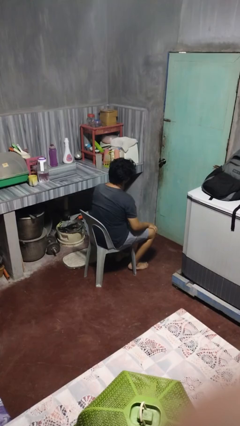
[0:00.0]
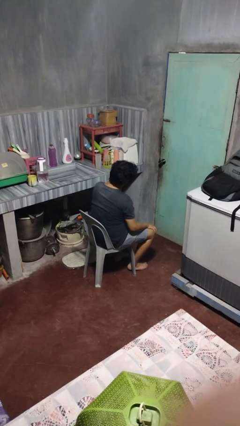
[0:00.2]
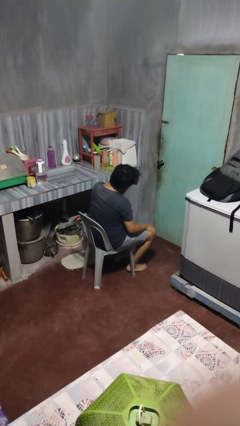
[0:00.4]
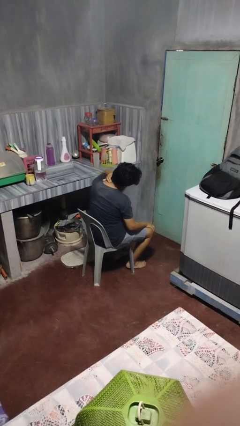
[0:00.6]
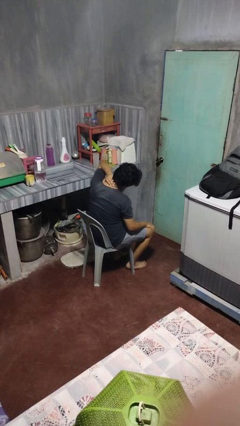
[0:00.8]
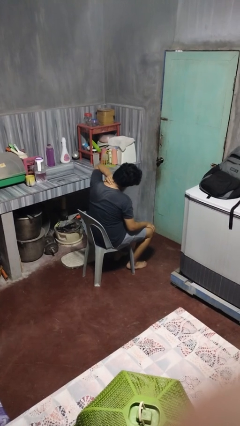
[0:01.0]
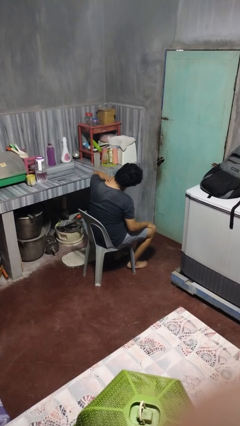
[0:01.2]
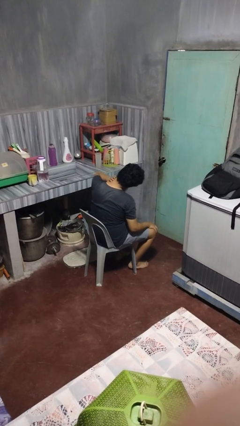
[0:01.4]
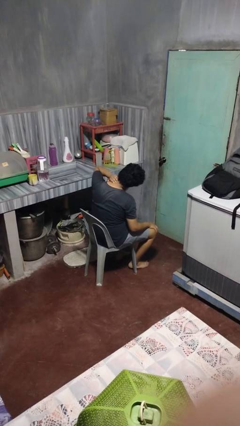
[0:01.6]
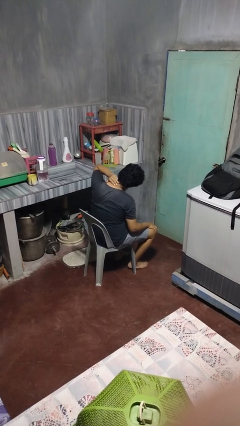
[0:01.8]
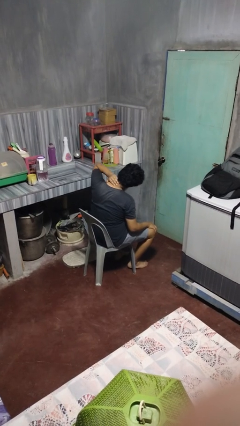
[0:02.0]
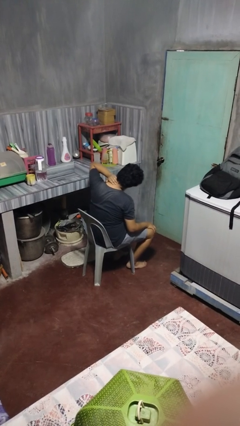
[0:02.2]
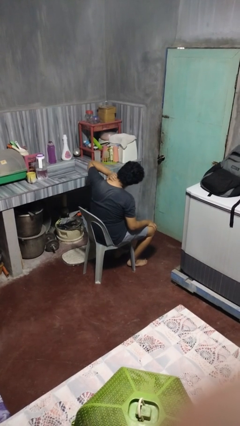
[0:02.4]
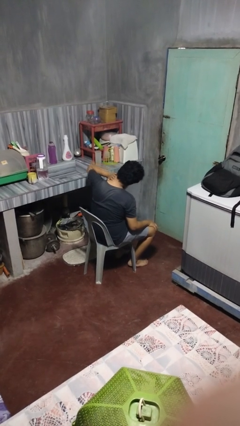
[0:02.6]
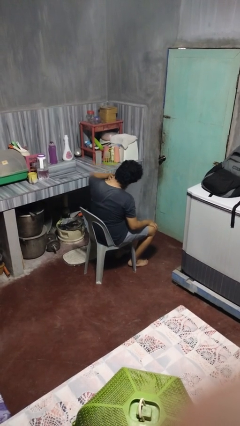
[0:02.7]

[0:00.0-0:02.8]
person rubs neck

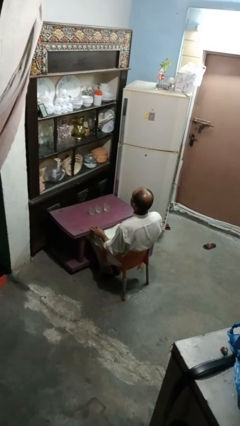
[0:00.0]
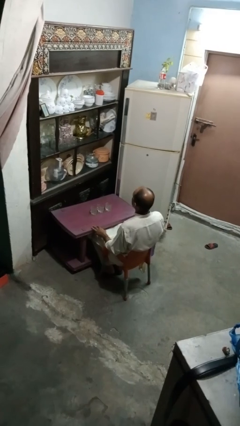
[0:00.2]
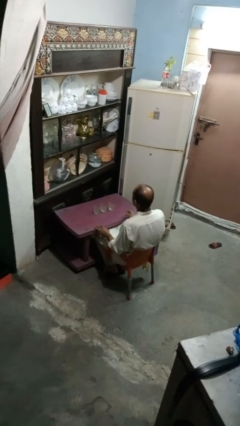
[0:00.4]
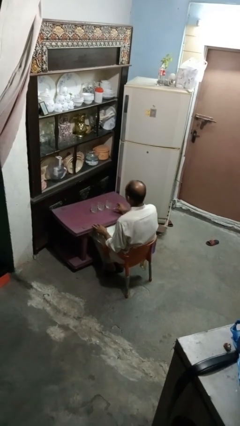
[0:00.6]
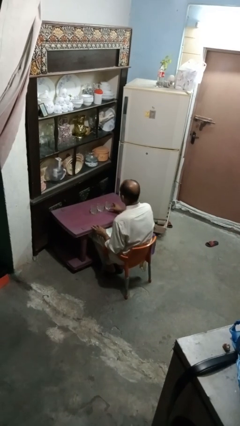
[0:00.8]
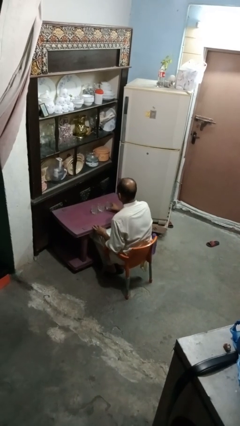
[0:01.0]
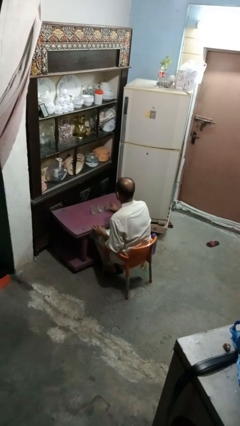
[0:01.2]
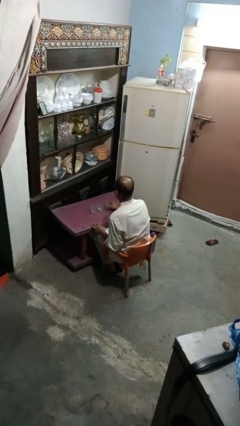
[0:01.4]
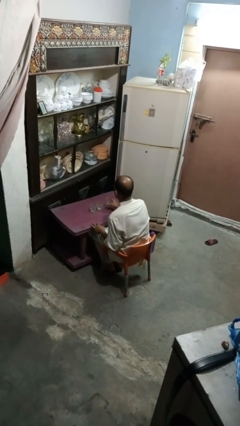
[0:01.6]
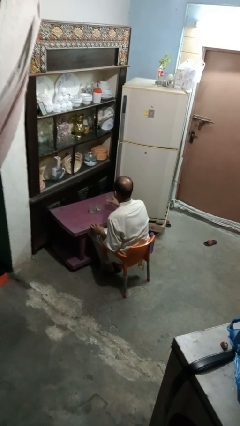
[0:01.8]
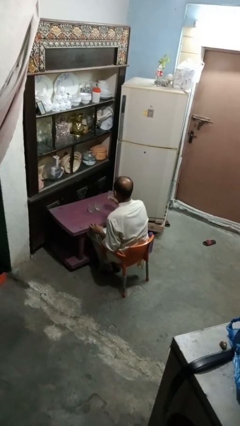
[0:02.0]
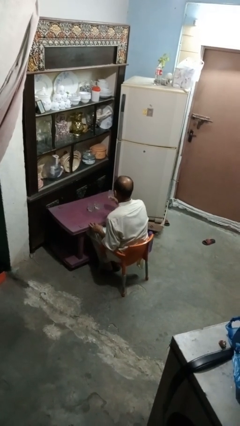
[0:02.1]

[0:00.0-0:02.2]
person picks up object from table

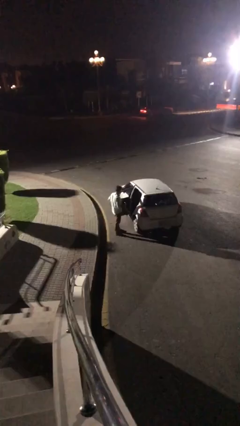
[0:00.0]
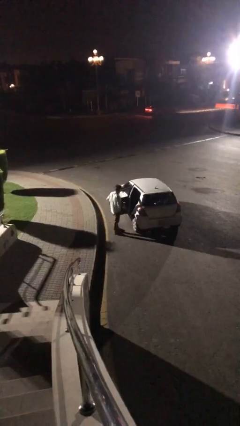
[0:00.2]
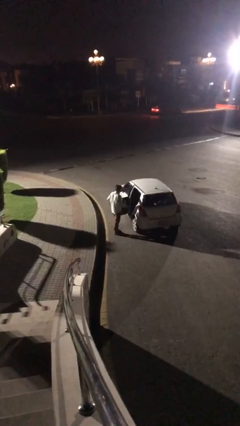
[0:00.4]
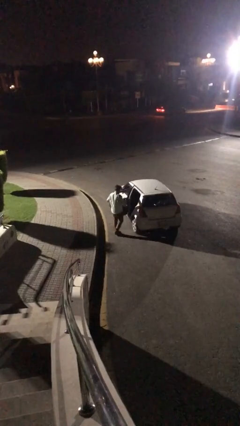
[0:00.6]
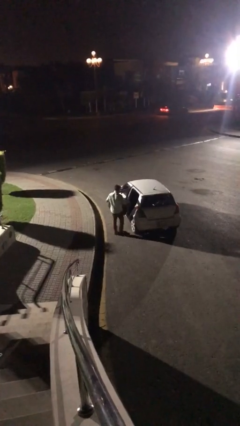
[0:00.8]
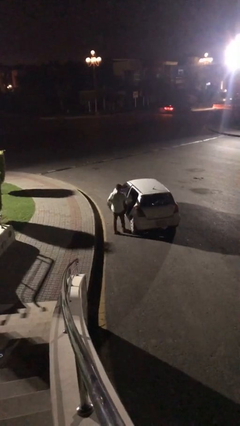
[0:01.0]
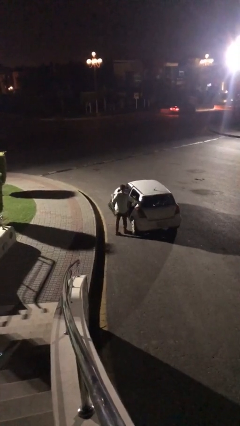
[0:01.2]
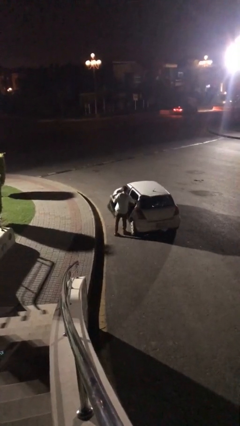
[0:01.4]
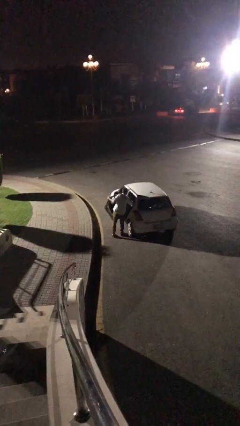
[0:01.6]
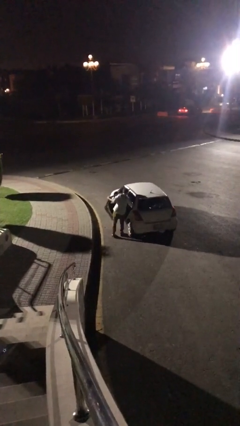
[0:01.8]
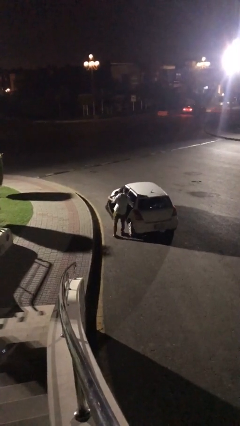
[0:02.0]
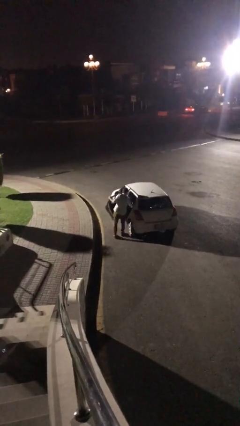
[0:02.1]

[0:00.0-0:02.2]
person loads car

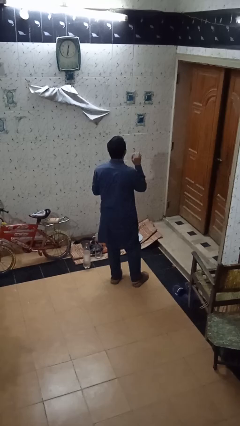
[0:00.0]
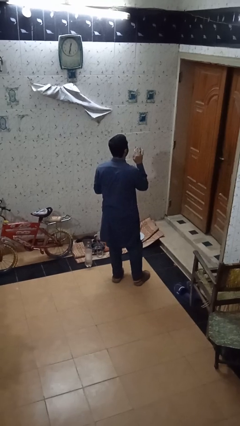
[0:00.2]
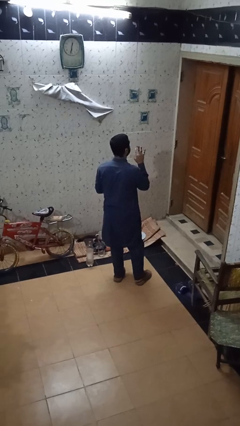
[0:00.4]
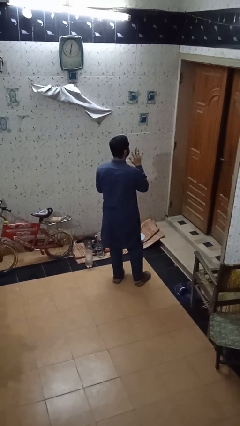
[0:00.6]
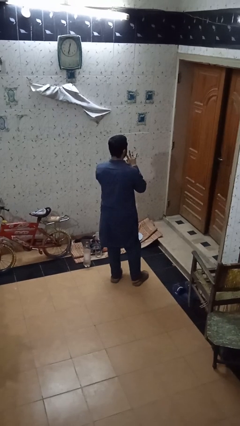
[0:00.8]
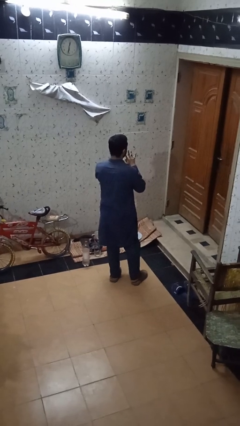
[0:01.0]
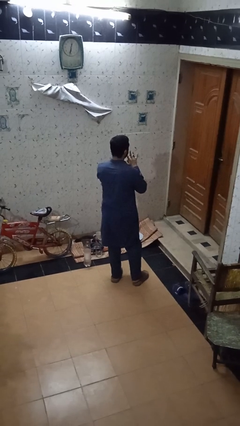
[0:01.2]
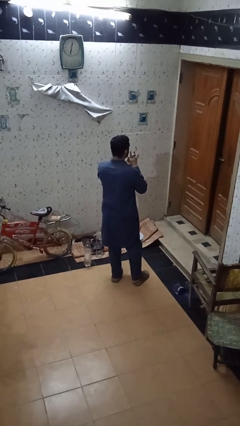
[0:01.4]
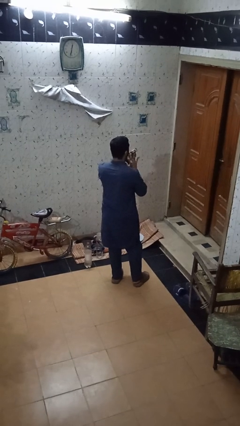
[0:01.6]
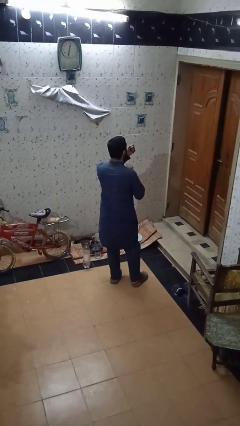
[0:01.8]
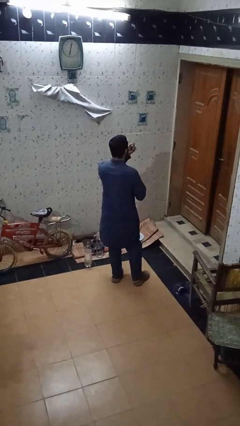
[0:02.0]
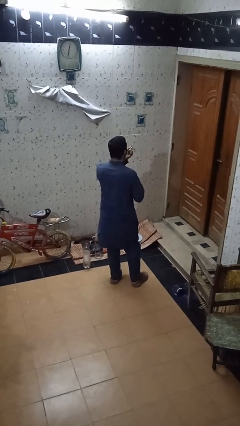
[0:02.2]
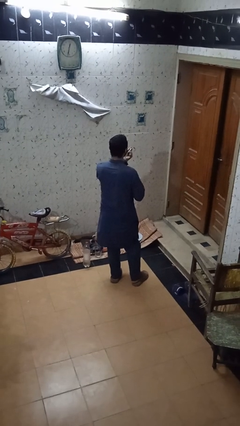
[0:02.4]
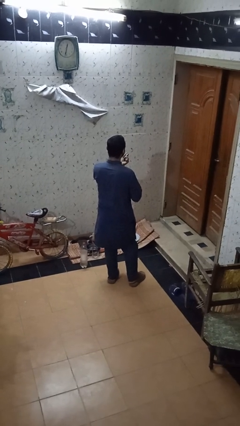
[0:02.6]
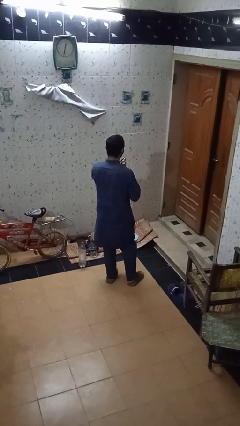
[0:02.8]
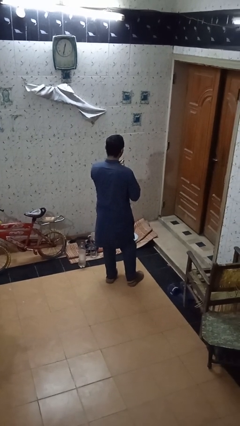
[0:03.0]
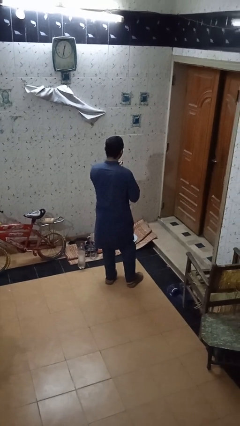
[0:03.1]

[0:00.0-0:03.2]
person takes off ring

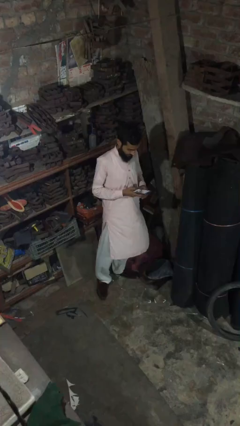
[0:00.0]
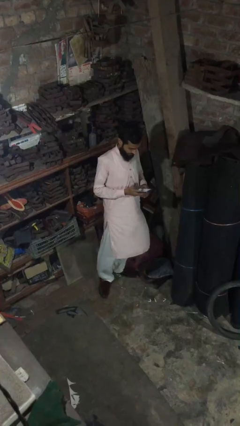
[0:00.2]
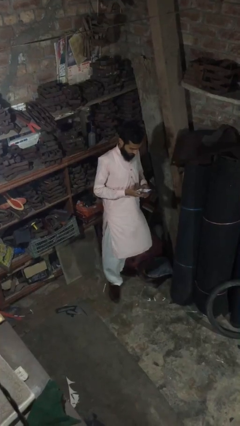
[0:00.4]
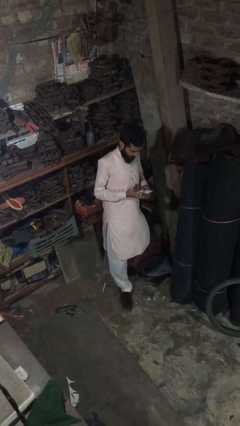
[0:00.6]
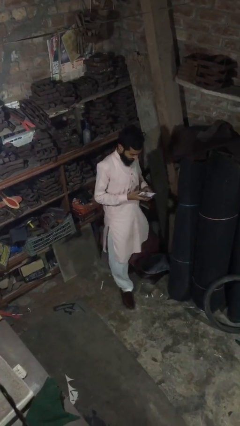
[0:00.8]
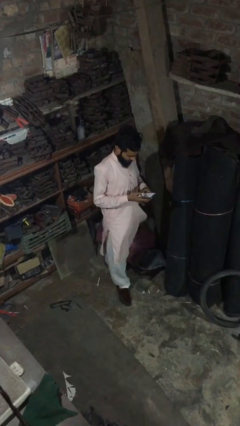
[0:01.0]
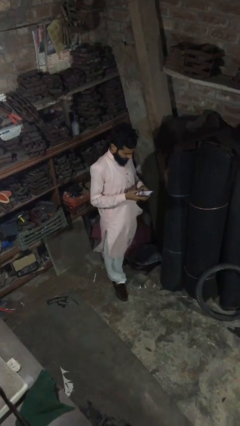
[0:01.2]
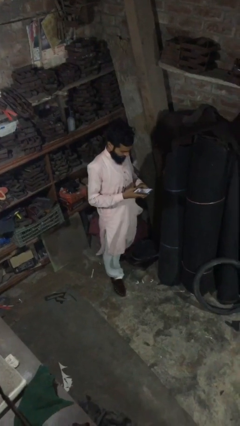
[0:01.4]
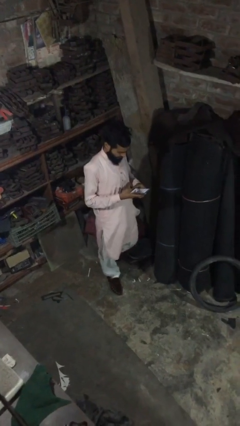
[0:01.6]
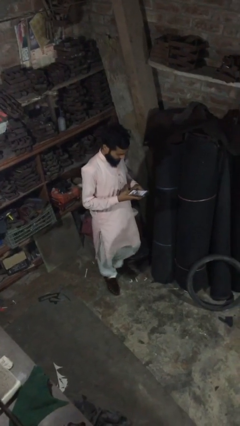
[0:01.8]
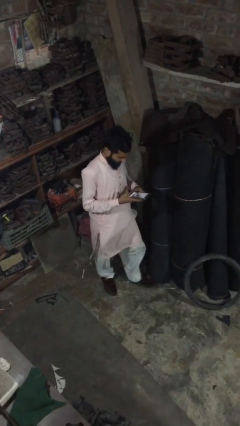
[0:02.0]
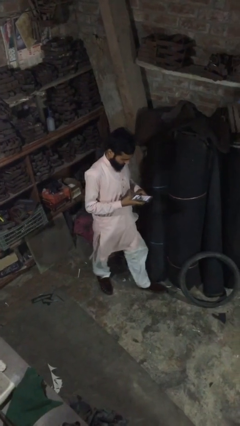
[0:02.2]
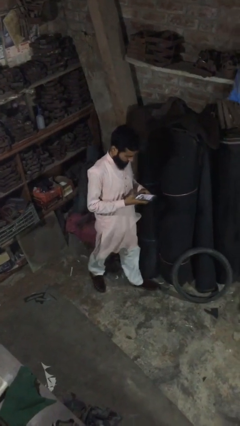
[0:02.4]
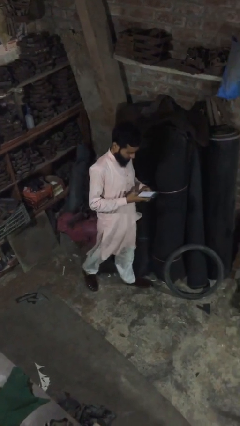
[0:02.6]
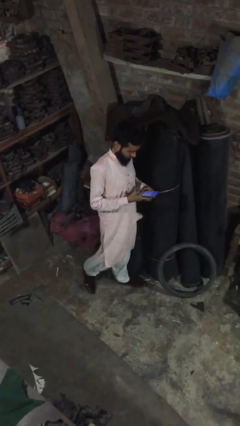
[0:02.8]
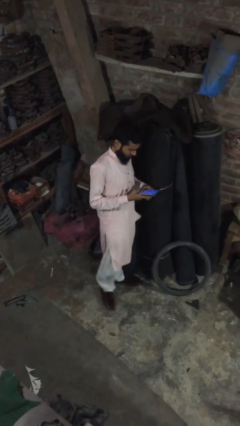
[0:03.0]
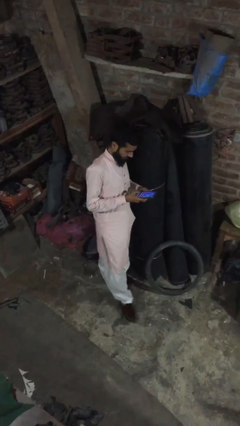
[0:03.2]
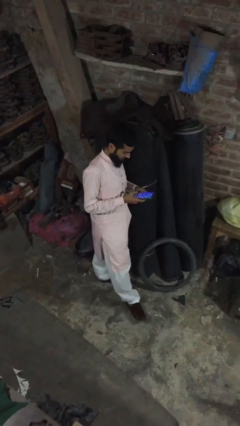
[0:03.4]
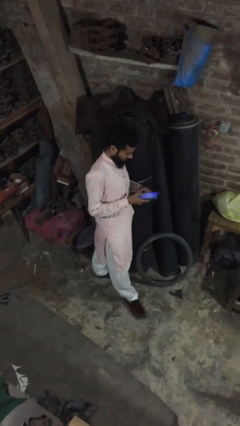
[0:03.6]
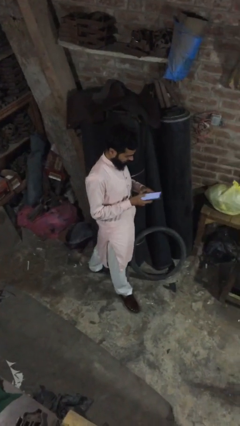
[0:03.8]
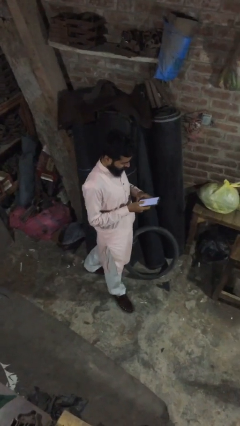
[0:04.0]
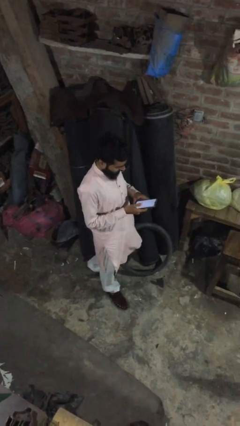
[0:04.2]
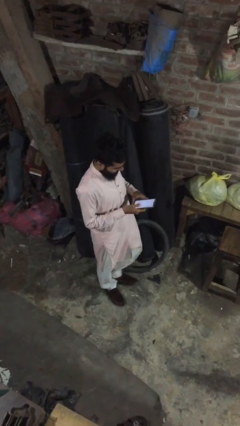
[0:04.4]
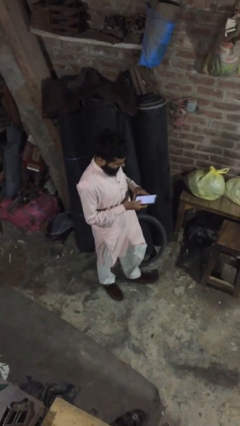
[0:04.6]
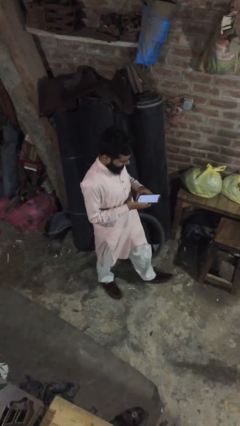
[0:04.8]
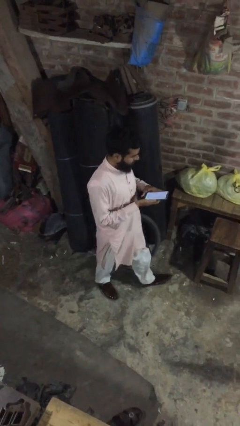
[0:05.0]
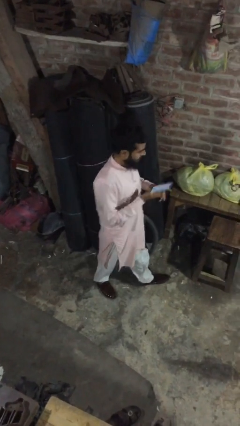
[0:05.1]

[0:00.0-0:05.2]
person texts on phone

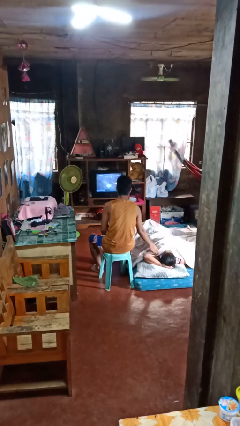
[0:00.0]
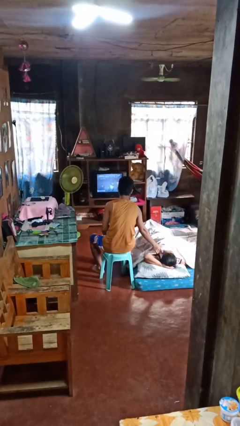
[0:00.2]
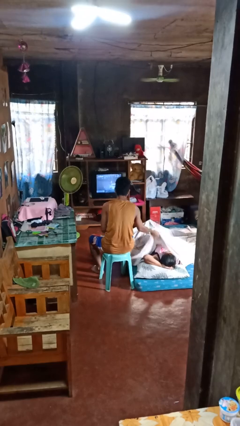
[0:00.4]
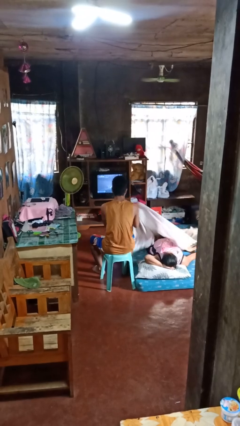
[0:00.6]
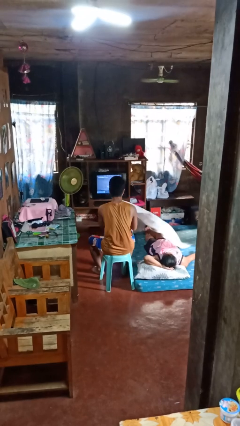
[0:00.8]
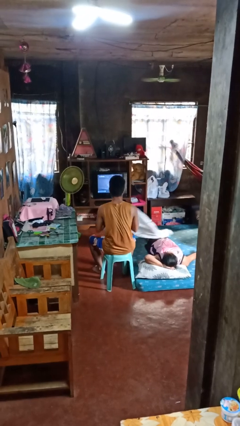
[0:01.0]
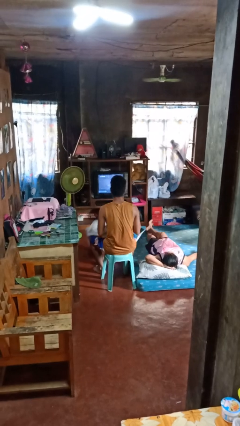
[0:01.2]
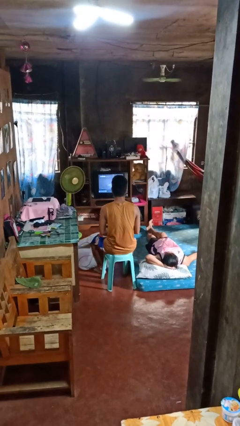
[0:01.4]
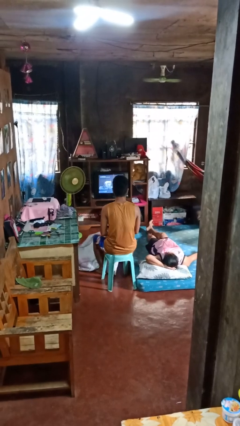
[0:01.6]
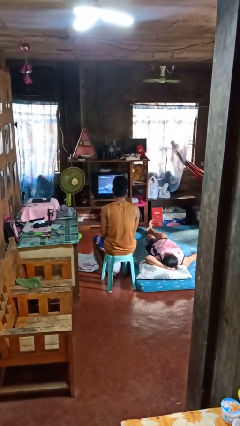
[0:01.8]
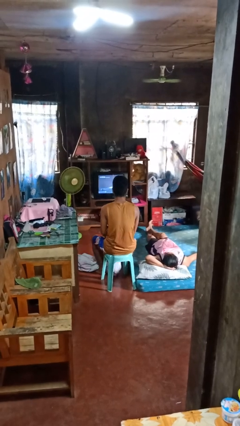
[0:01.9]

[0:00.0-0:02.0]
person uncovers friend with blanket
